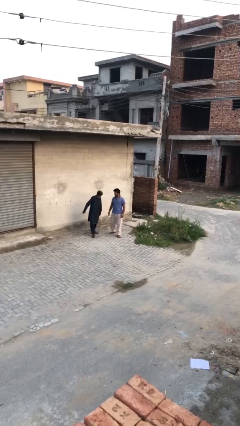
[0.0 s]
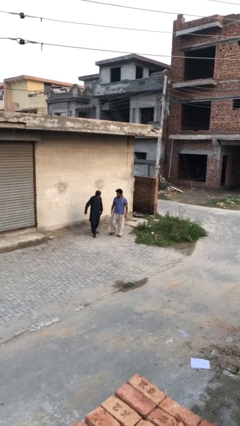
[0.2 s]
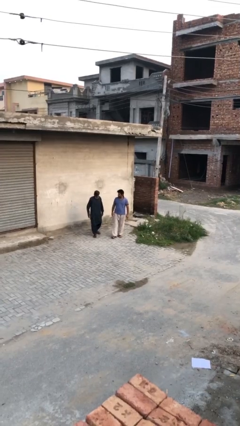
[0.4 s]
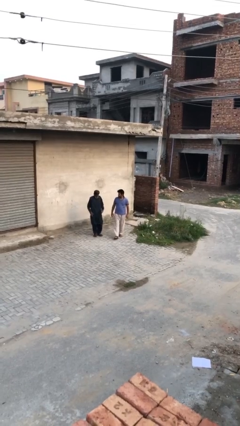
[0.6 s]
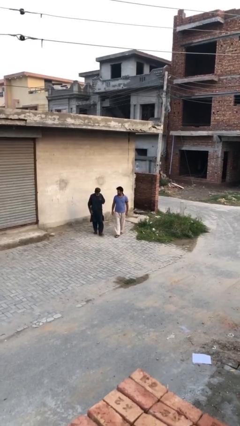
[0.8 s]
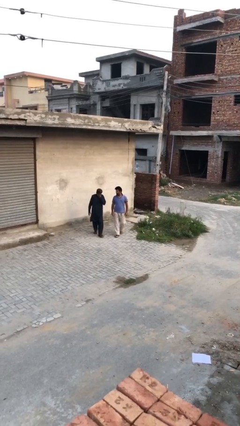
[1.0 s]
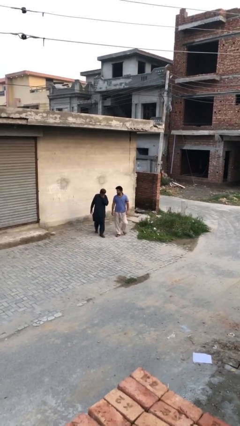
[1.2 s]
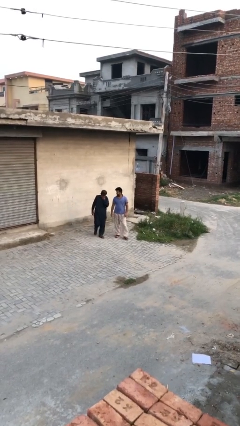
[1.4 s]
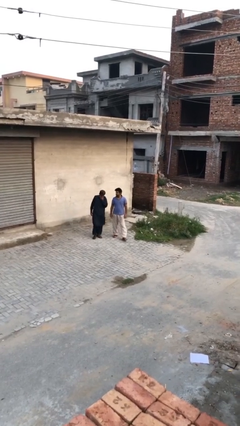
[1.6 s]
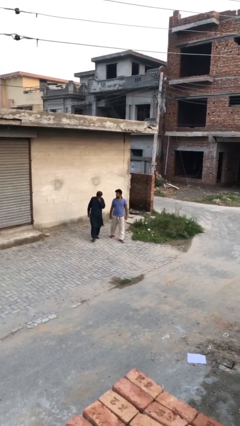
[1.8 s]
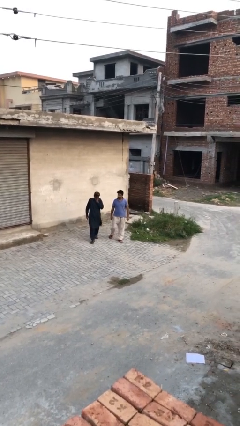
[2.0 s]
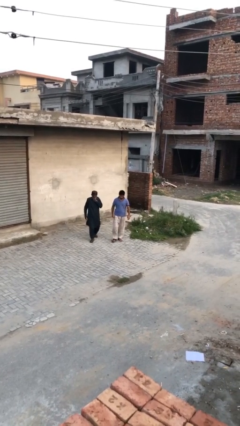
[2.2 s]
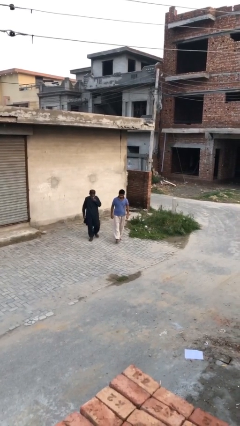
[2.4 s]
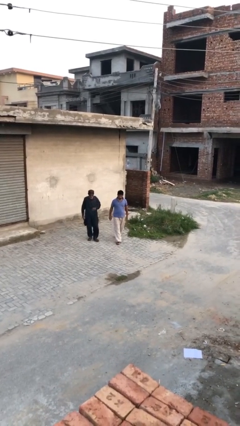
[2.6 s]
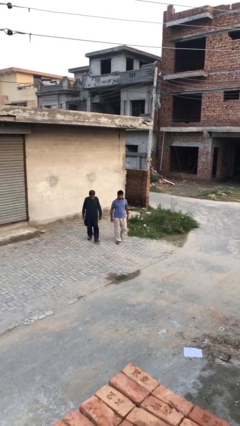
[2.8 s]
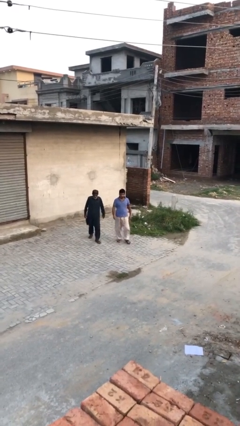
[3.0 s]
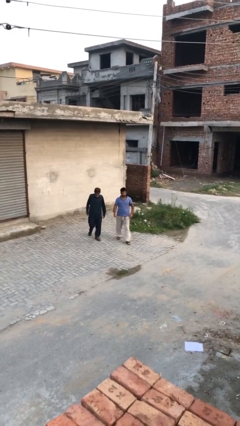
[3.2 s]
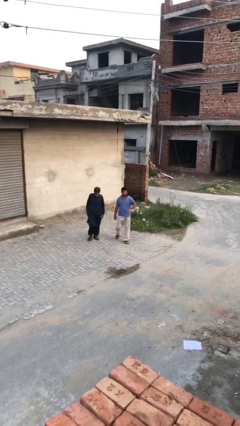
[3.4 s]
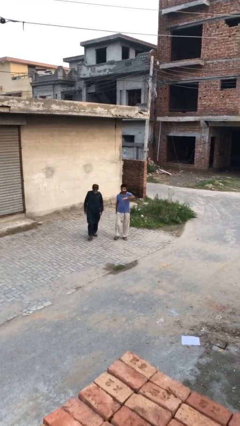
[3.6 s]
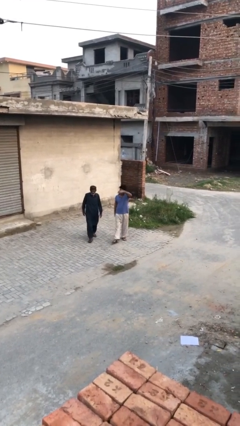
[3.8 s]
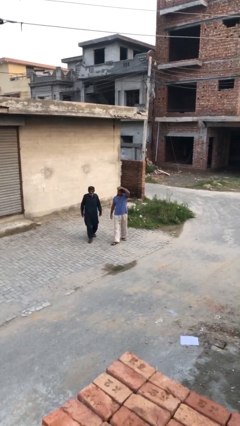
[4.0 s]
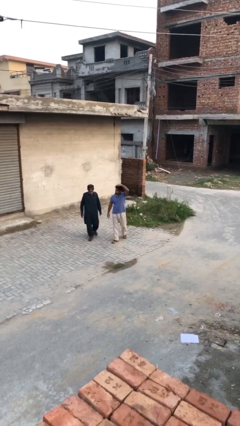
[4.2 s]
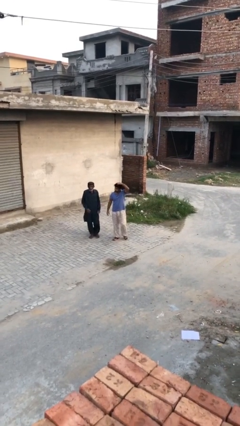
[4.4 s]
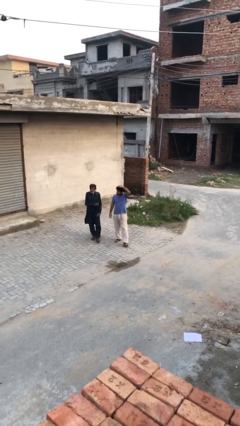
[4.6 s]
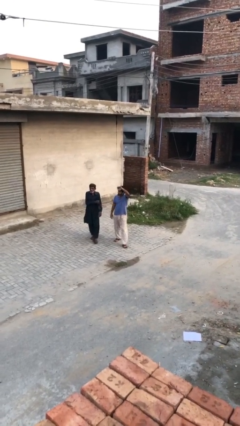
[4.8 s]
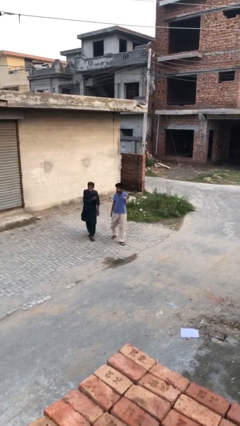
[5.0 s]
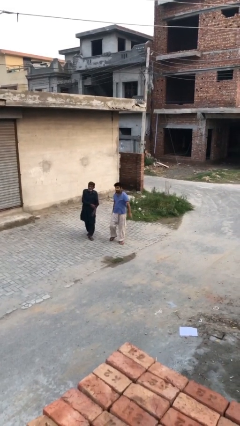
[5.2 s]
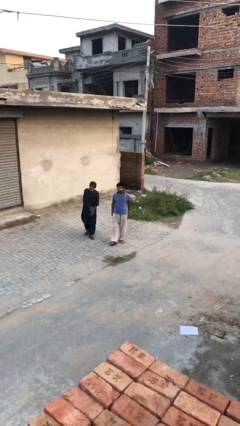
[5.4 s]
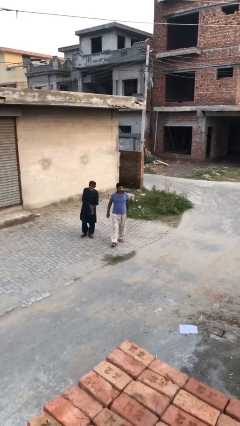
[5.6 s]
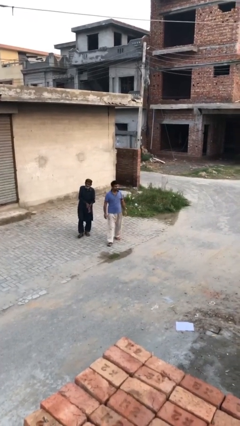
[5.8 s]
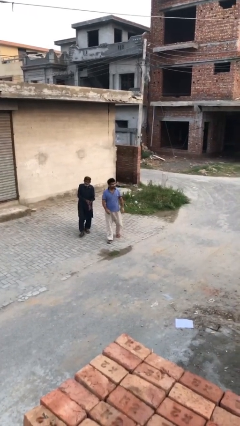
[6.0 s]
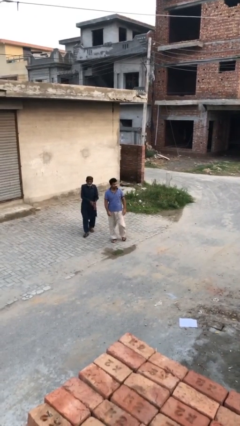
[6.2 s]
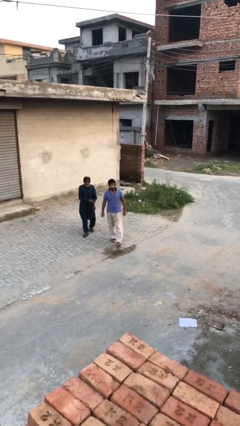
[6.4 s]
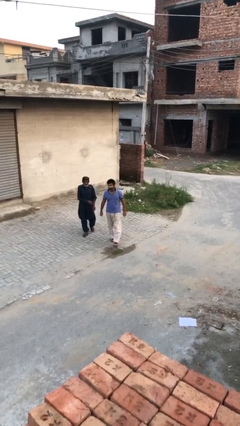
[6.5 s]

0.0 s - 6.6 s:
person talks to person

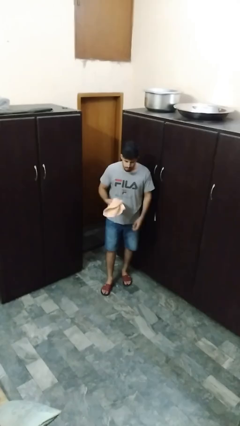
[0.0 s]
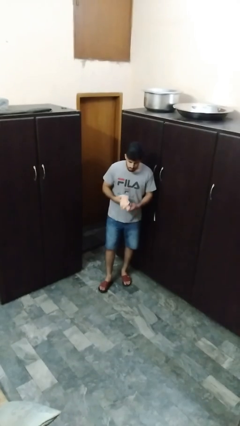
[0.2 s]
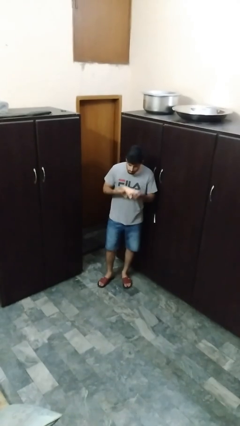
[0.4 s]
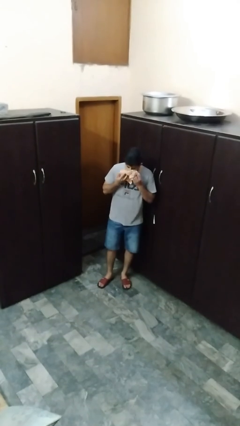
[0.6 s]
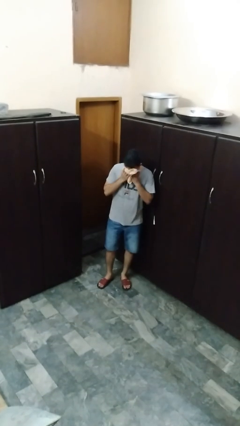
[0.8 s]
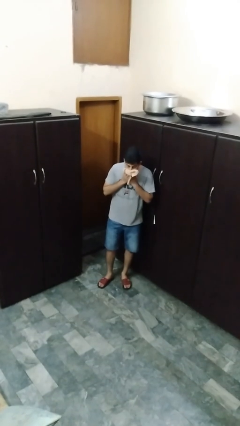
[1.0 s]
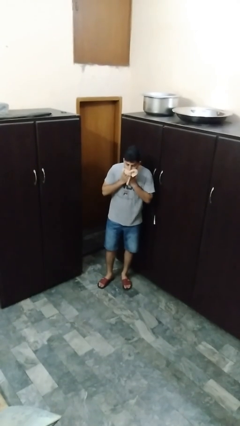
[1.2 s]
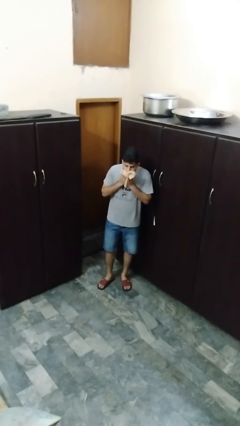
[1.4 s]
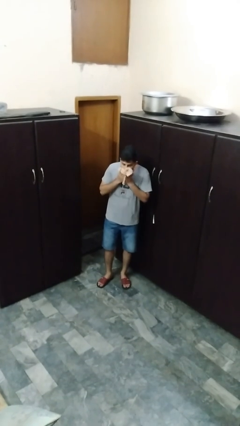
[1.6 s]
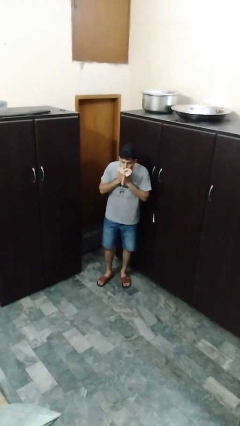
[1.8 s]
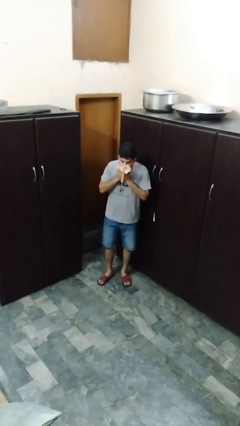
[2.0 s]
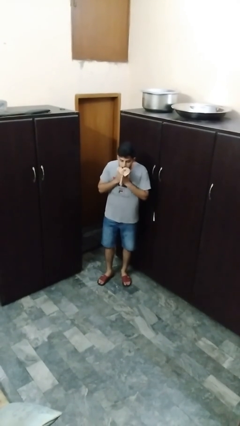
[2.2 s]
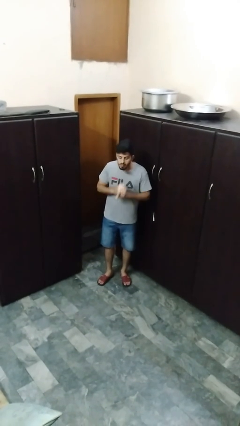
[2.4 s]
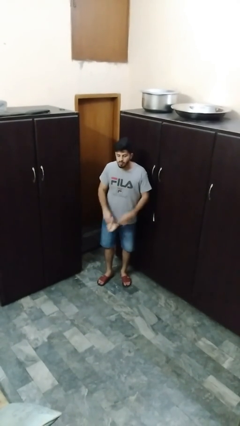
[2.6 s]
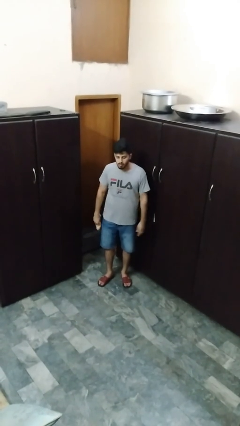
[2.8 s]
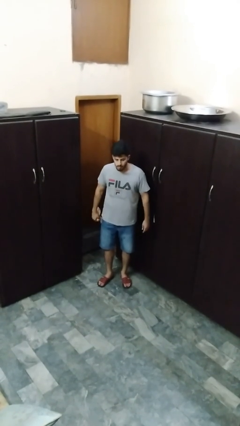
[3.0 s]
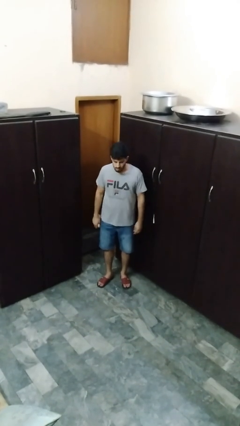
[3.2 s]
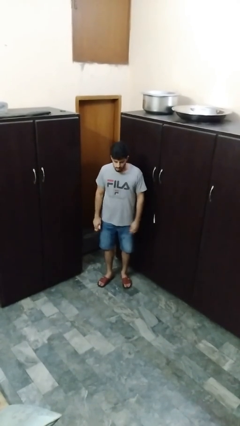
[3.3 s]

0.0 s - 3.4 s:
person wipes mouth with napkin

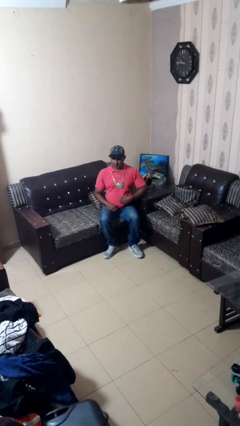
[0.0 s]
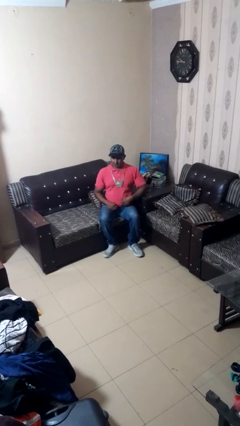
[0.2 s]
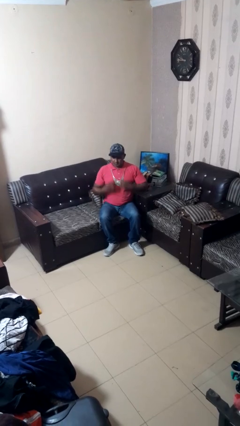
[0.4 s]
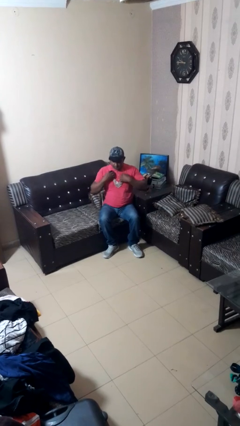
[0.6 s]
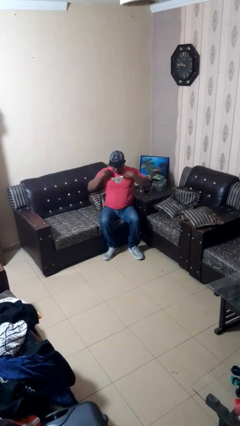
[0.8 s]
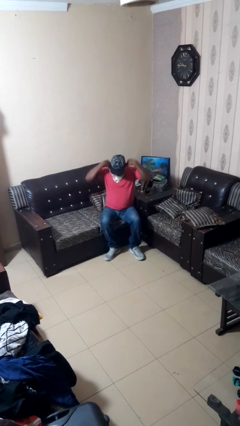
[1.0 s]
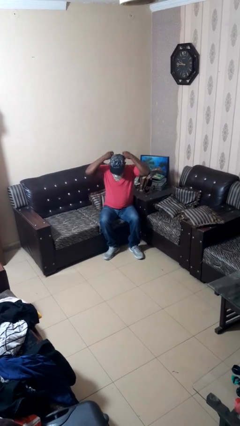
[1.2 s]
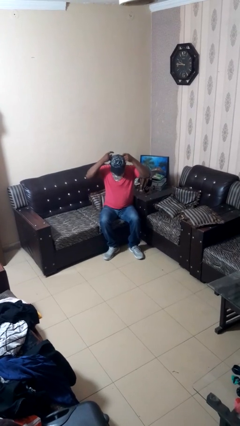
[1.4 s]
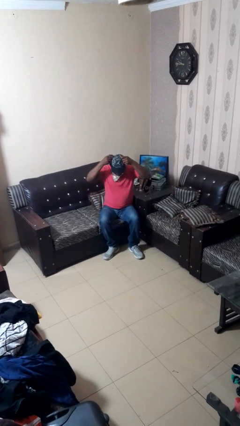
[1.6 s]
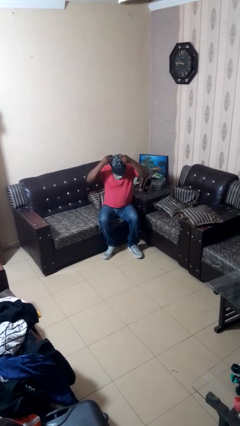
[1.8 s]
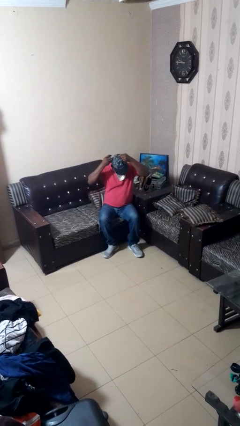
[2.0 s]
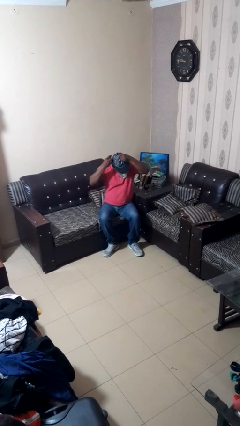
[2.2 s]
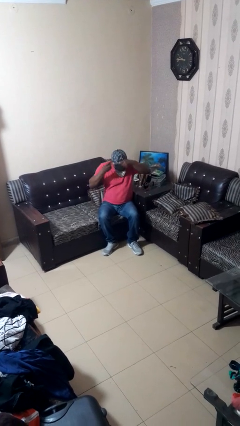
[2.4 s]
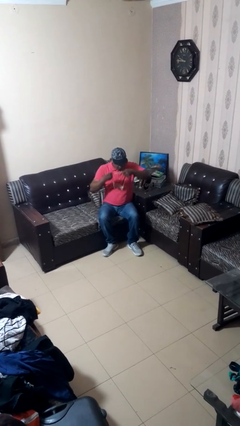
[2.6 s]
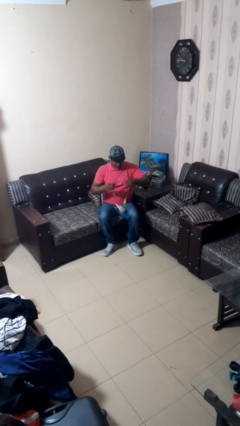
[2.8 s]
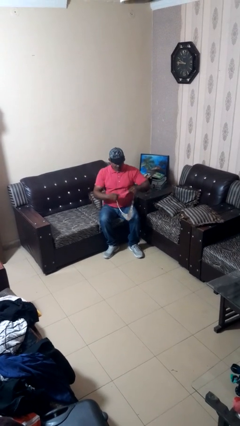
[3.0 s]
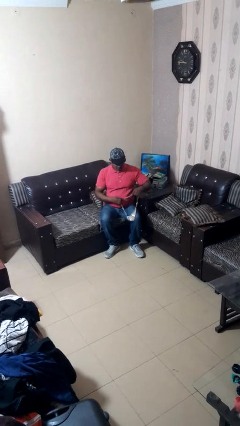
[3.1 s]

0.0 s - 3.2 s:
person takes off necklace

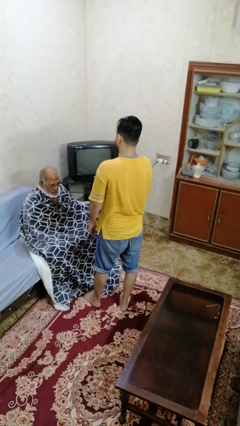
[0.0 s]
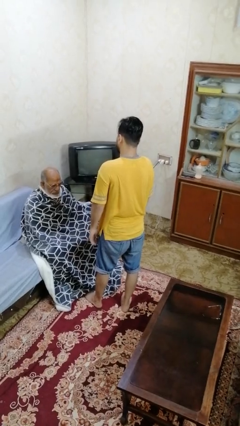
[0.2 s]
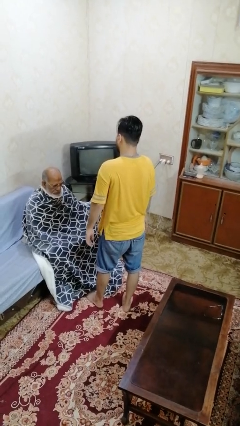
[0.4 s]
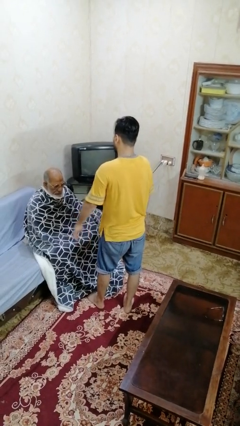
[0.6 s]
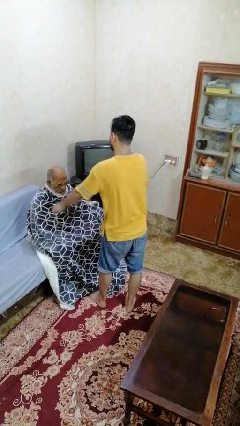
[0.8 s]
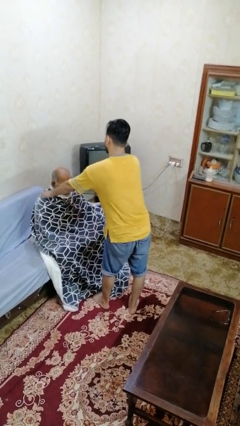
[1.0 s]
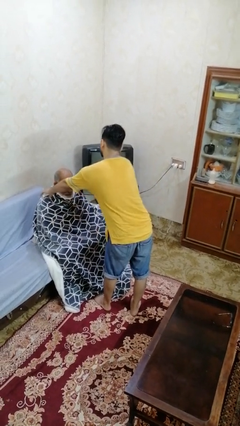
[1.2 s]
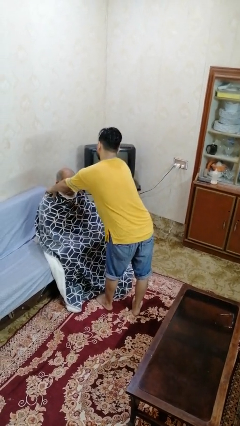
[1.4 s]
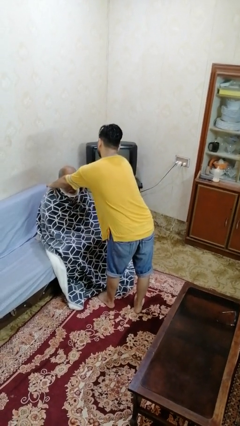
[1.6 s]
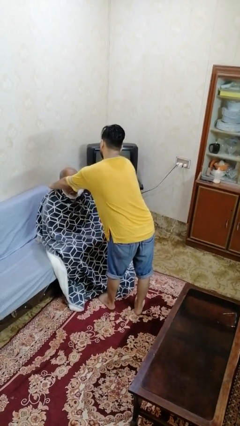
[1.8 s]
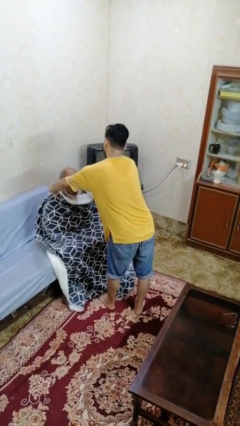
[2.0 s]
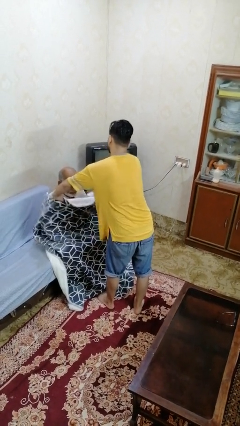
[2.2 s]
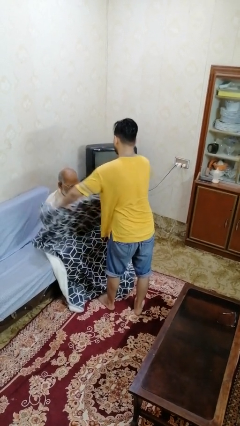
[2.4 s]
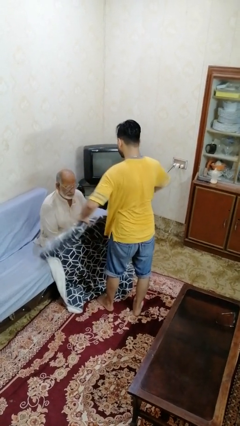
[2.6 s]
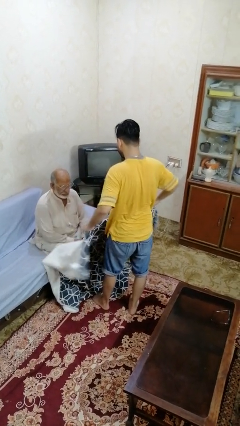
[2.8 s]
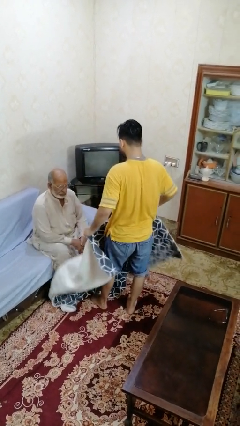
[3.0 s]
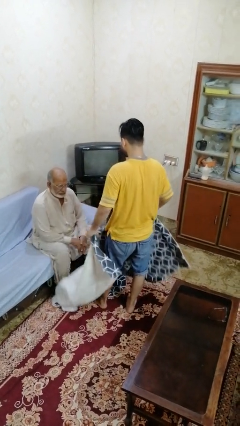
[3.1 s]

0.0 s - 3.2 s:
person uncovers friend with blanket

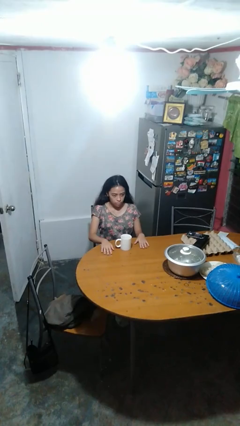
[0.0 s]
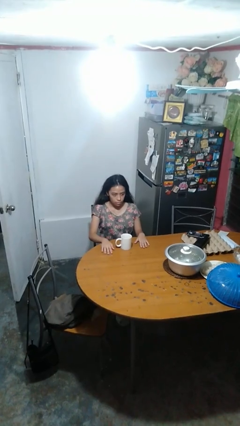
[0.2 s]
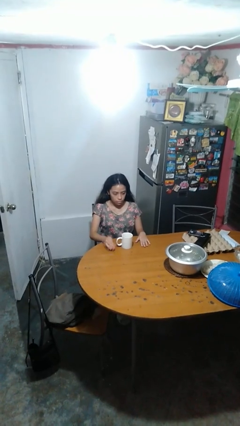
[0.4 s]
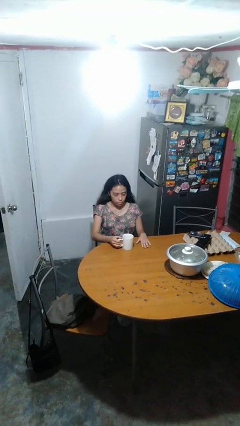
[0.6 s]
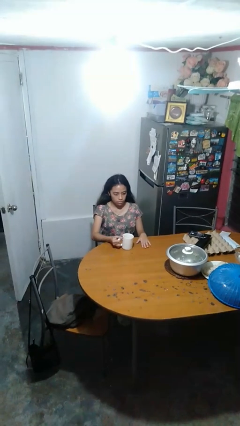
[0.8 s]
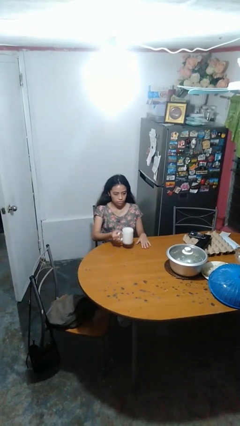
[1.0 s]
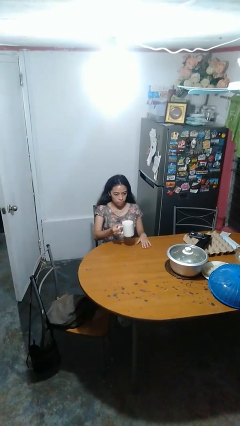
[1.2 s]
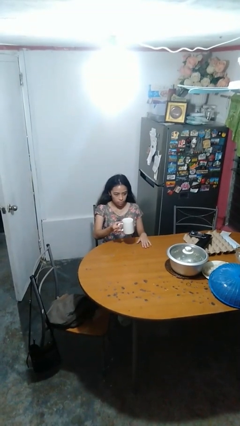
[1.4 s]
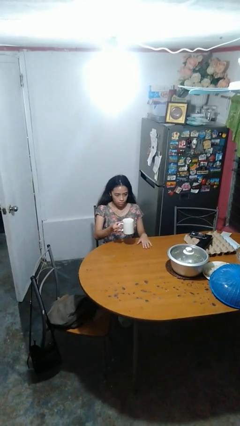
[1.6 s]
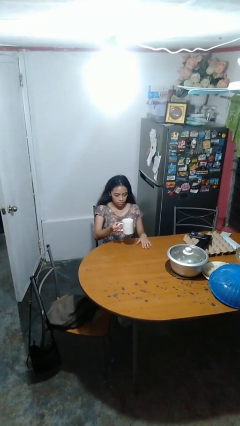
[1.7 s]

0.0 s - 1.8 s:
person picks up object from table
